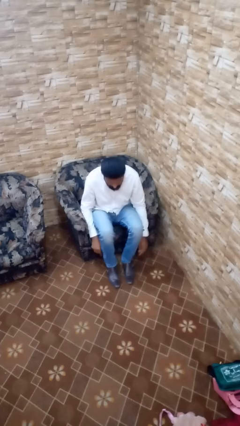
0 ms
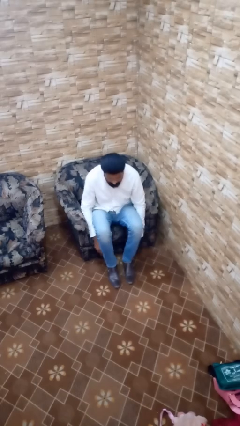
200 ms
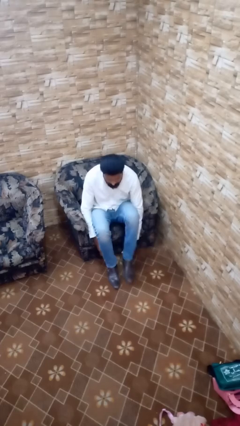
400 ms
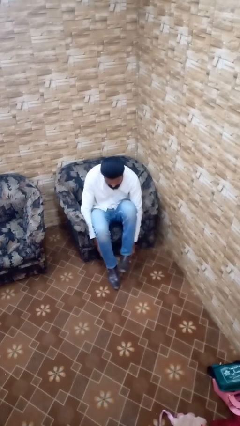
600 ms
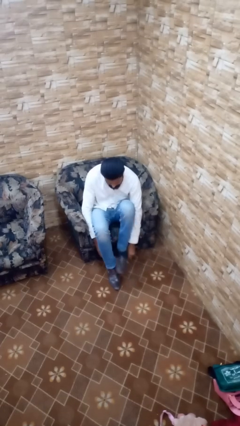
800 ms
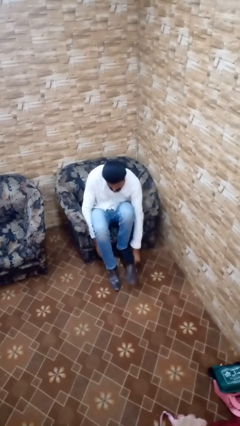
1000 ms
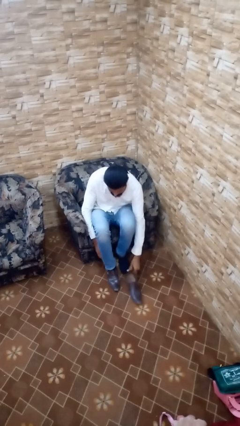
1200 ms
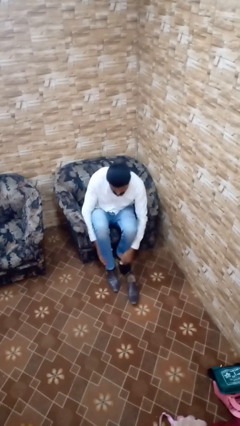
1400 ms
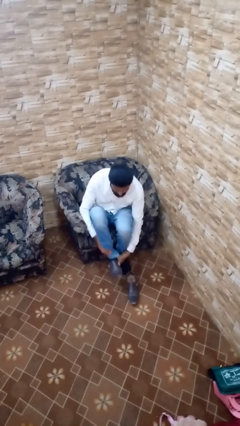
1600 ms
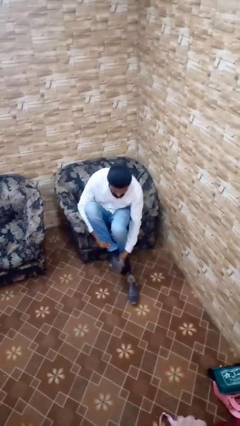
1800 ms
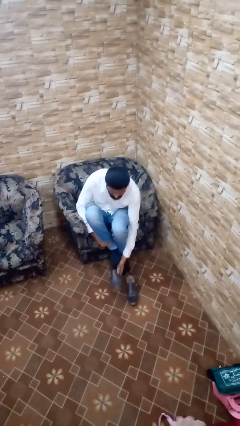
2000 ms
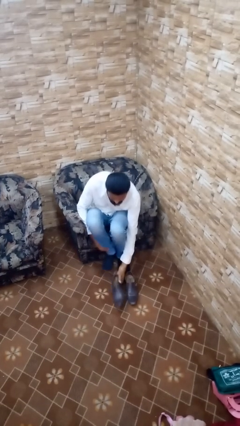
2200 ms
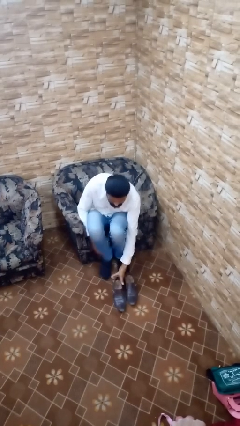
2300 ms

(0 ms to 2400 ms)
person takes off shoes

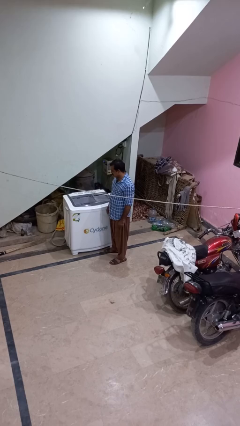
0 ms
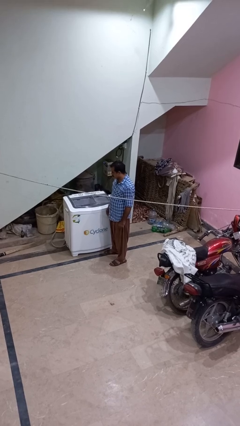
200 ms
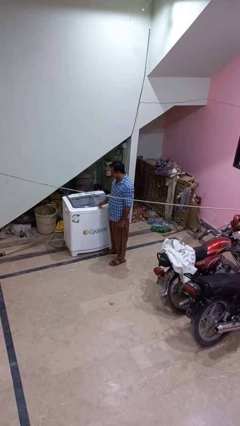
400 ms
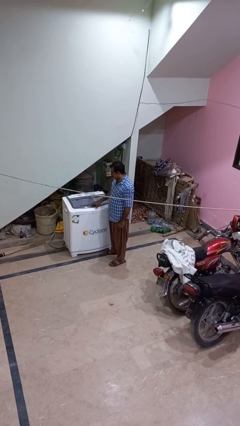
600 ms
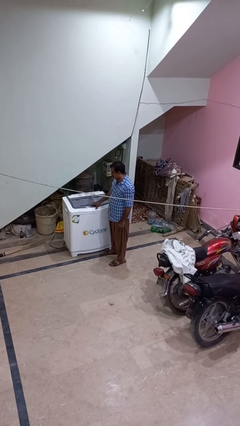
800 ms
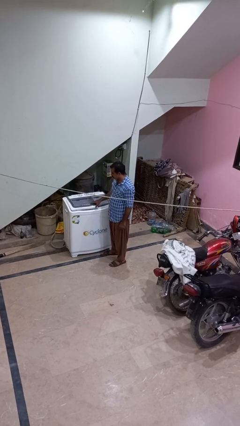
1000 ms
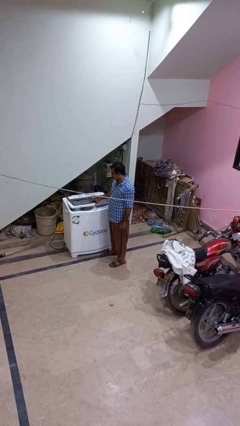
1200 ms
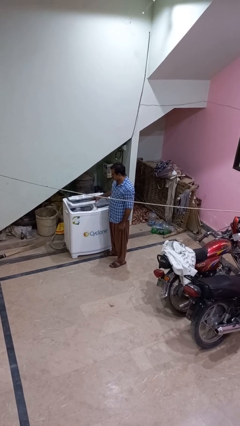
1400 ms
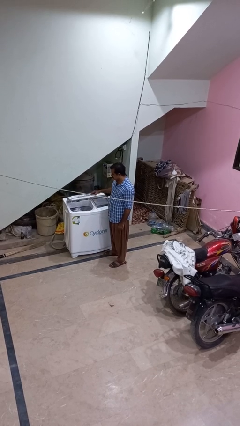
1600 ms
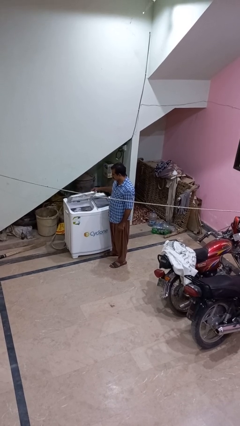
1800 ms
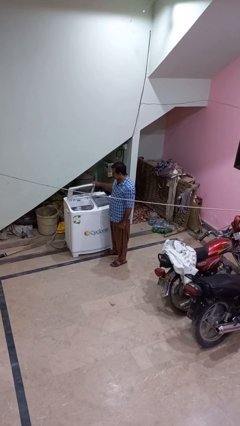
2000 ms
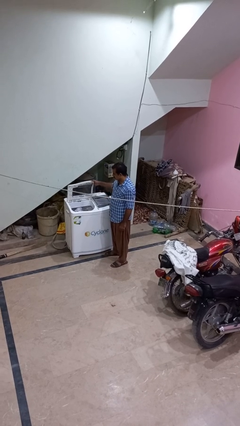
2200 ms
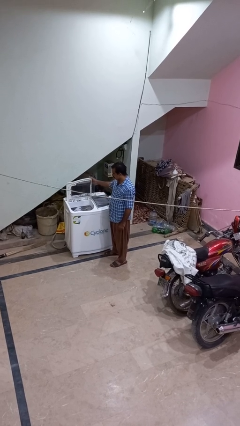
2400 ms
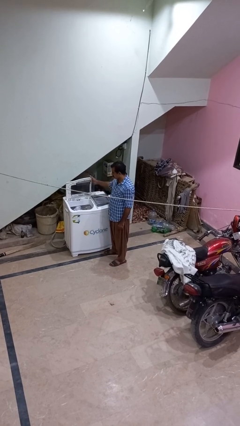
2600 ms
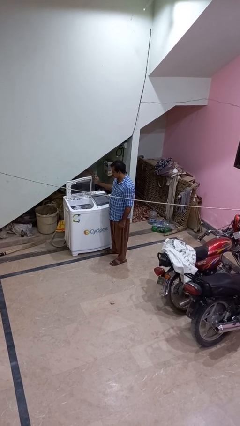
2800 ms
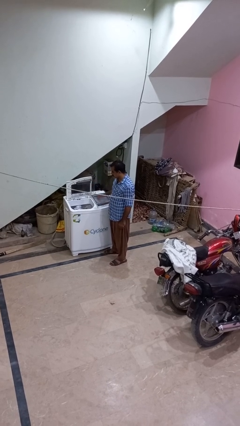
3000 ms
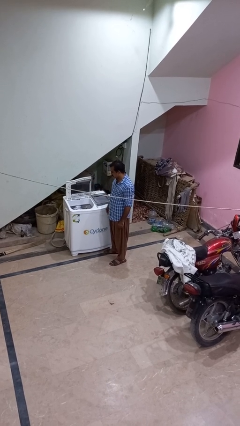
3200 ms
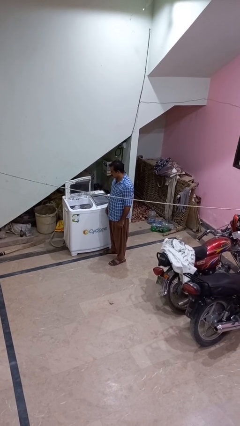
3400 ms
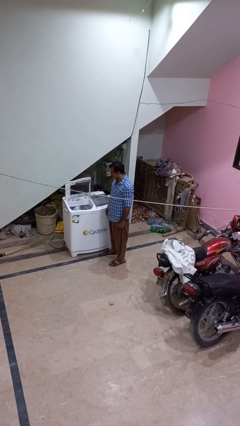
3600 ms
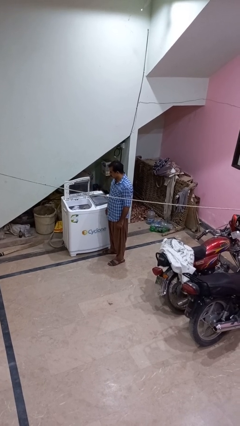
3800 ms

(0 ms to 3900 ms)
person opens clothes washer

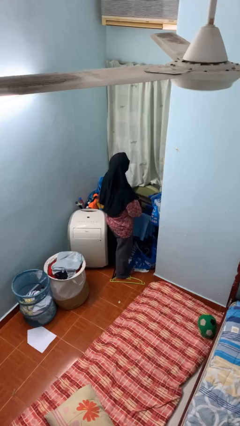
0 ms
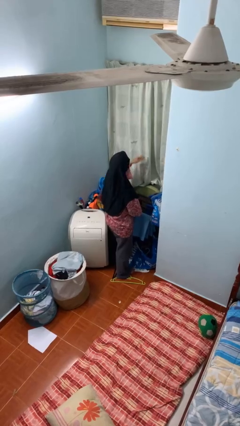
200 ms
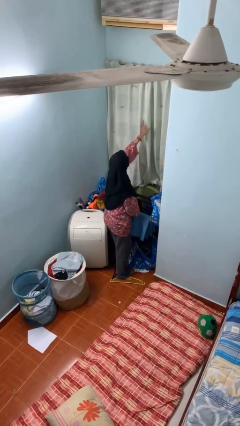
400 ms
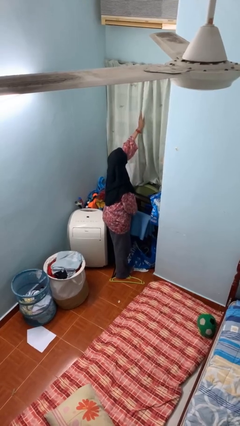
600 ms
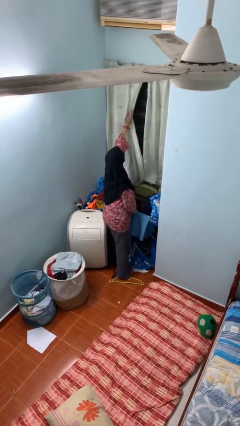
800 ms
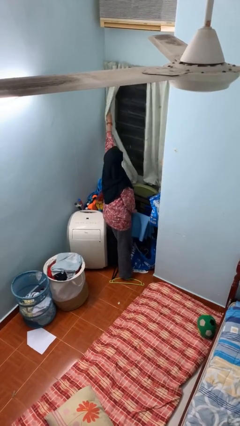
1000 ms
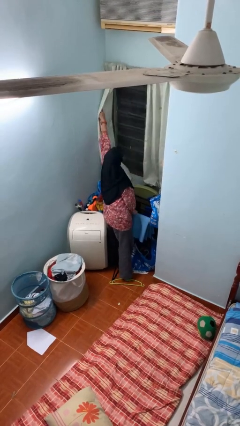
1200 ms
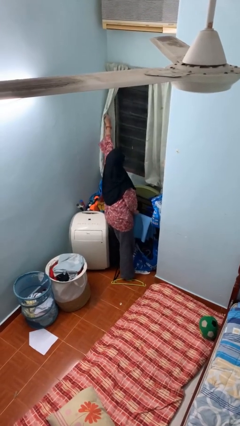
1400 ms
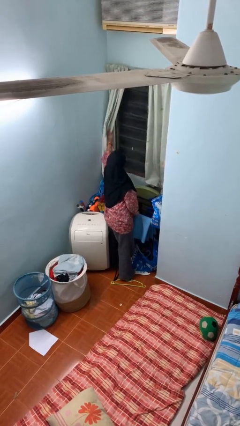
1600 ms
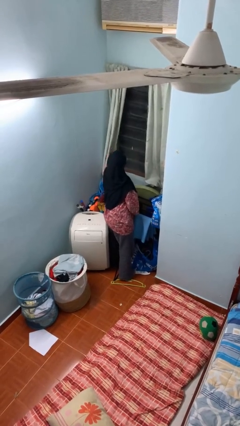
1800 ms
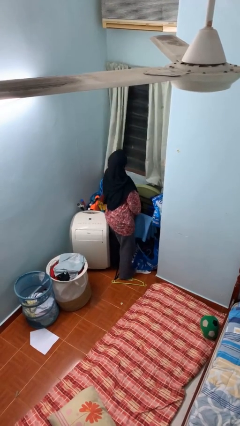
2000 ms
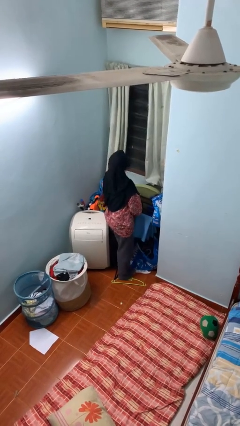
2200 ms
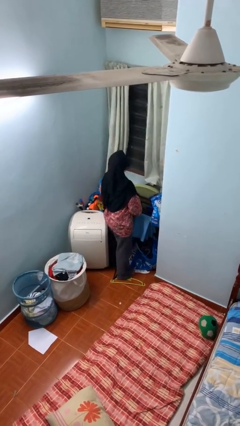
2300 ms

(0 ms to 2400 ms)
person opens curtains

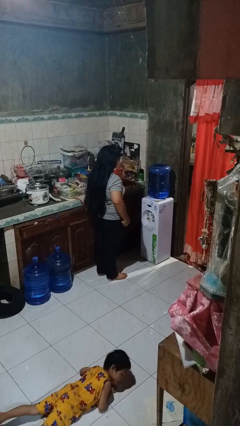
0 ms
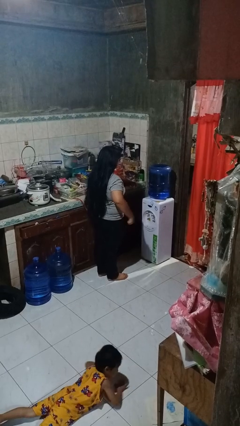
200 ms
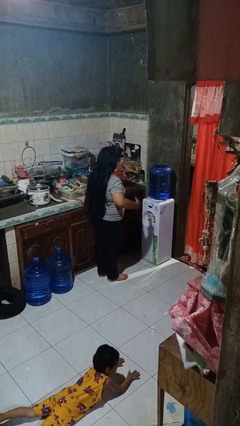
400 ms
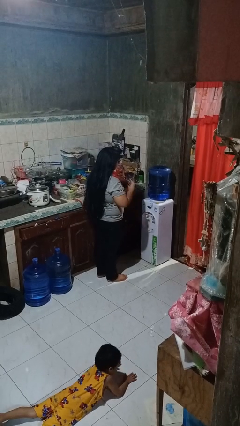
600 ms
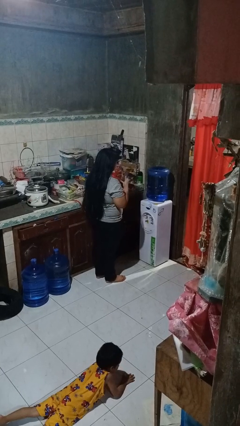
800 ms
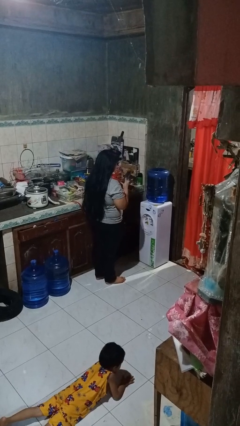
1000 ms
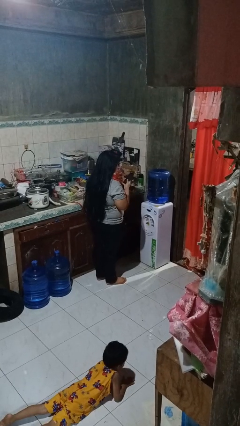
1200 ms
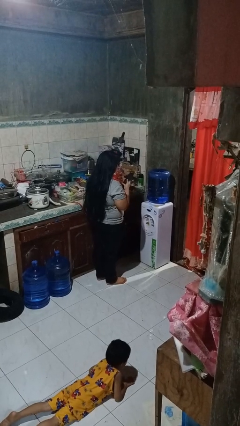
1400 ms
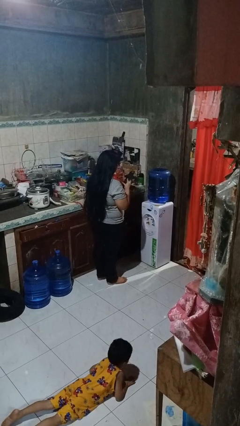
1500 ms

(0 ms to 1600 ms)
person takes phone from pocket

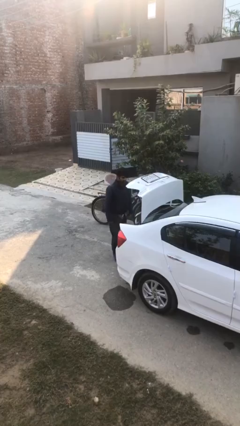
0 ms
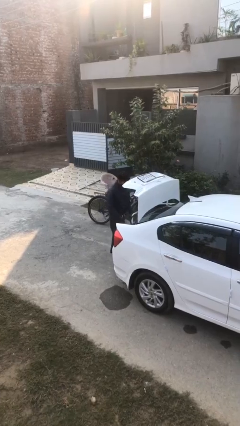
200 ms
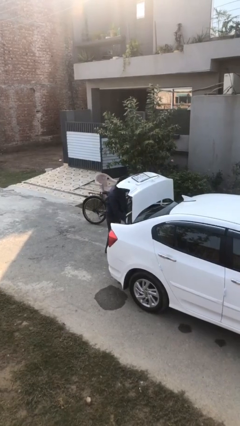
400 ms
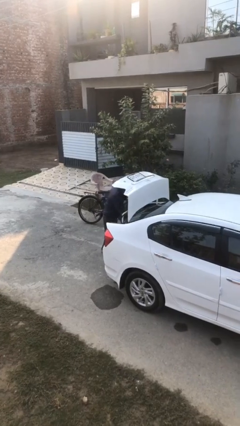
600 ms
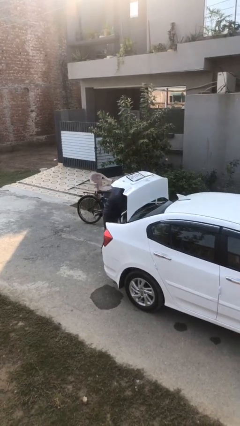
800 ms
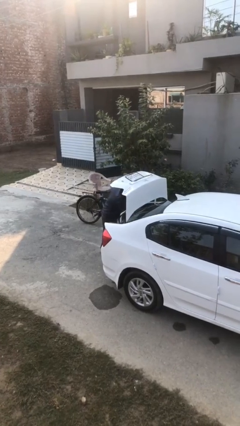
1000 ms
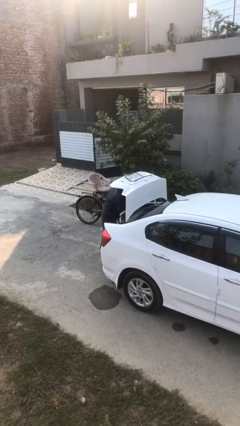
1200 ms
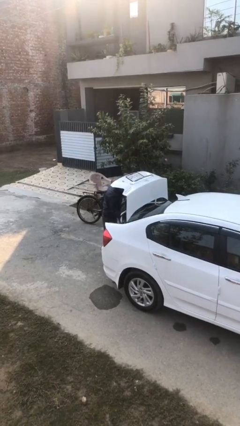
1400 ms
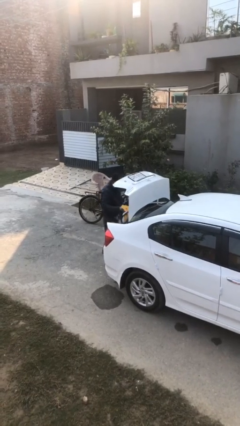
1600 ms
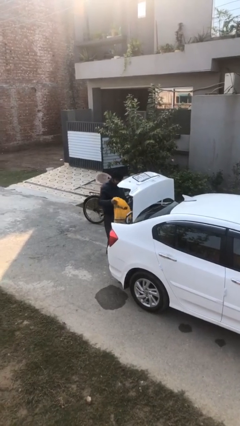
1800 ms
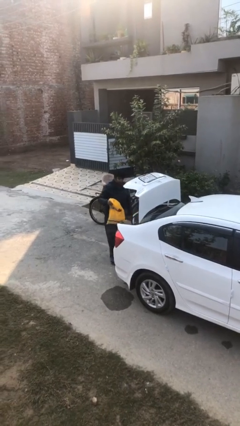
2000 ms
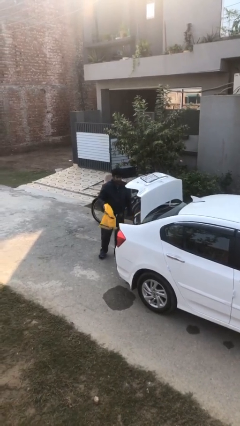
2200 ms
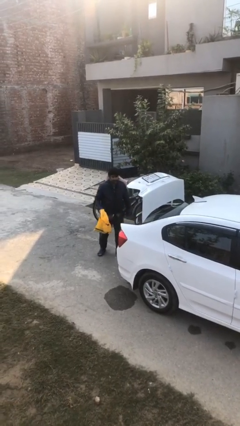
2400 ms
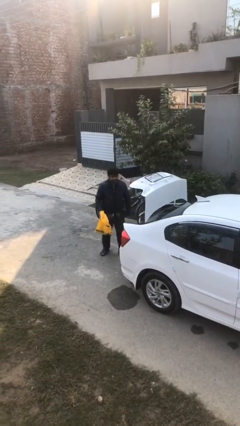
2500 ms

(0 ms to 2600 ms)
person unloads car

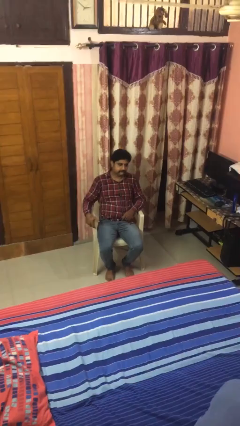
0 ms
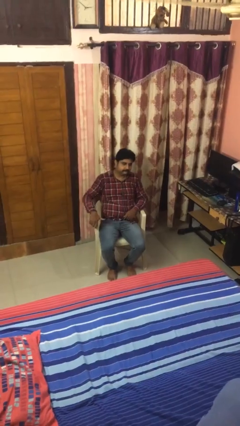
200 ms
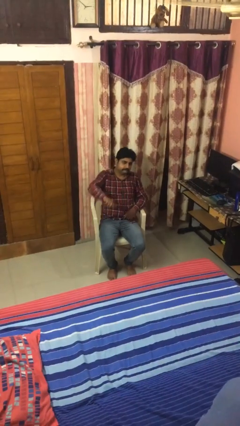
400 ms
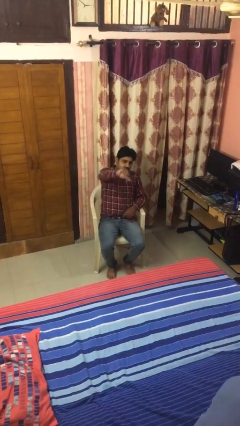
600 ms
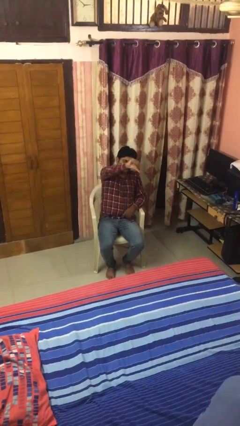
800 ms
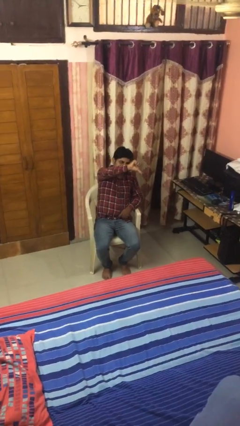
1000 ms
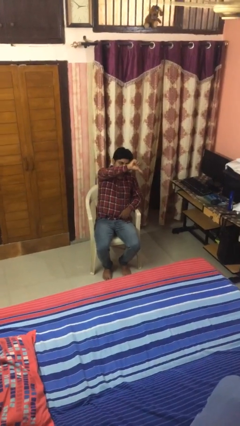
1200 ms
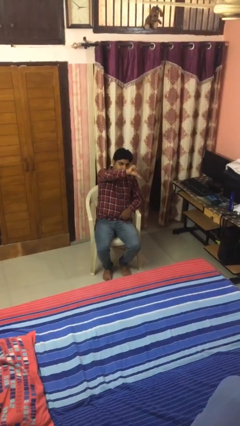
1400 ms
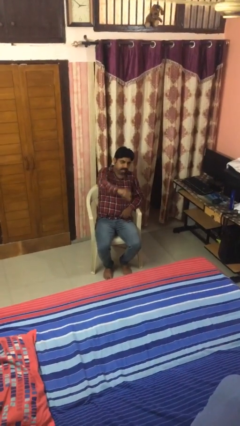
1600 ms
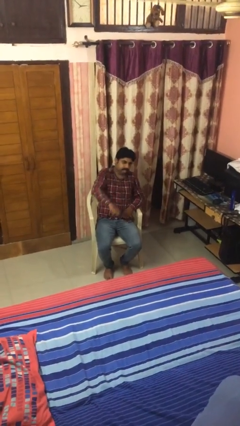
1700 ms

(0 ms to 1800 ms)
person gestures thumbs down

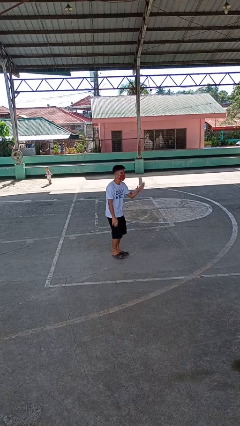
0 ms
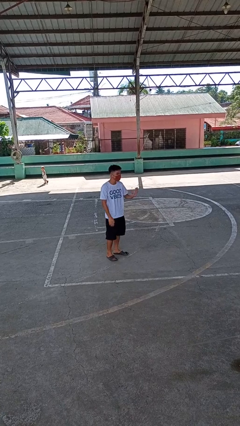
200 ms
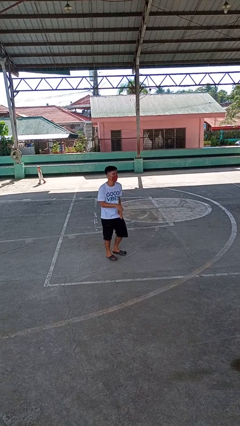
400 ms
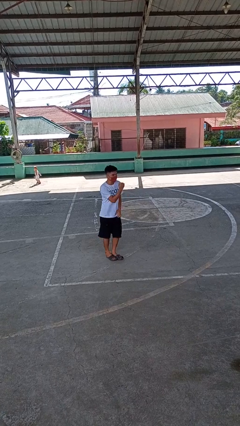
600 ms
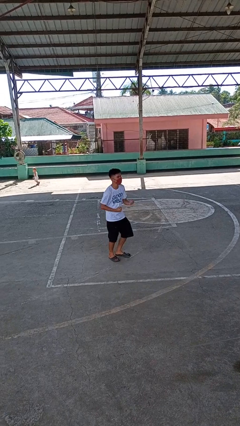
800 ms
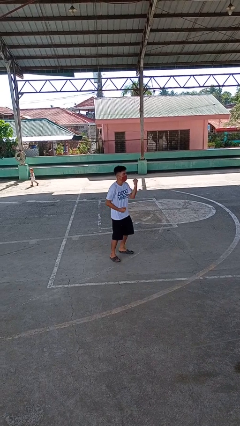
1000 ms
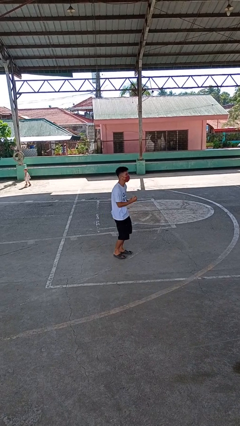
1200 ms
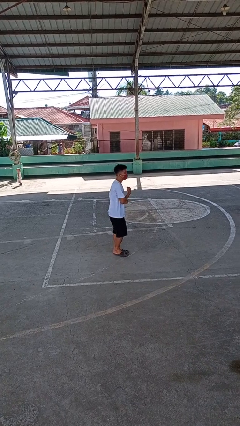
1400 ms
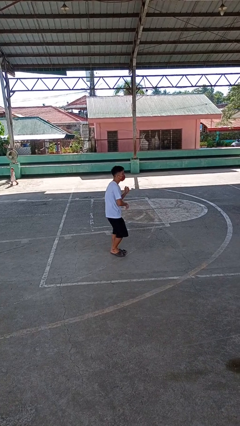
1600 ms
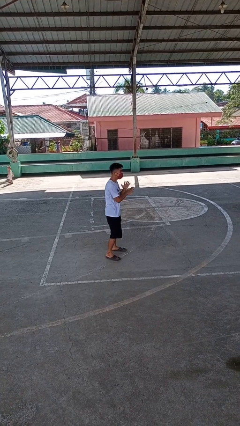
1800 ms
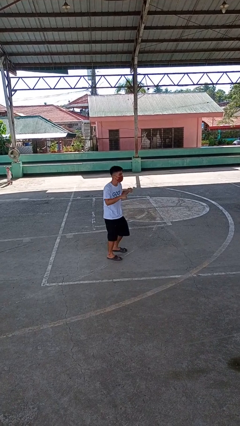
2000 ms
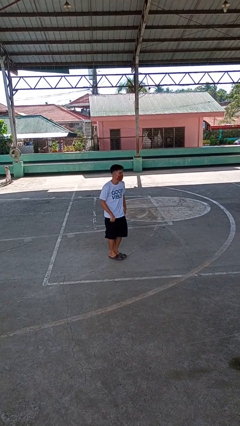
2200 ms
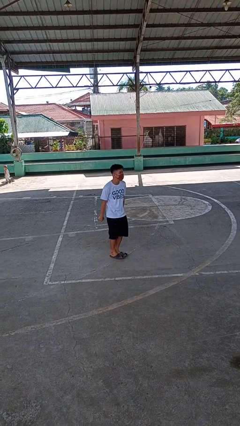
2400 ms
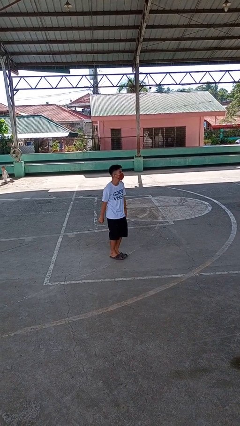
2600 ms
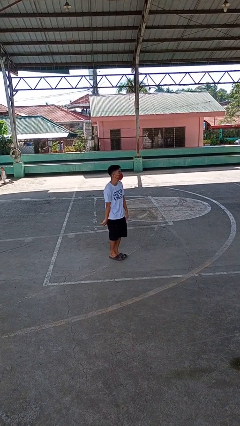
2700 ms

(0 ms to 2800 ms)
person dances in place
